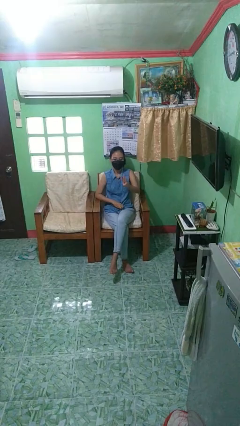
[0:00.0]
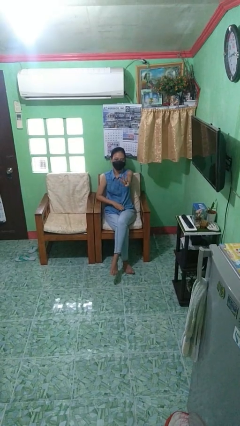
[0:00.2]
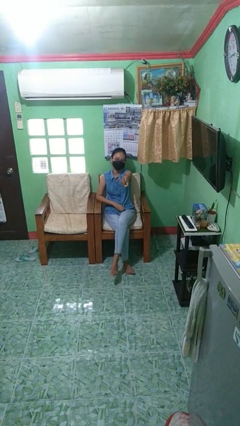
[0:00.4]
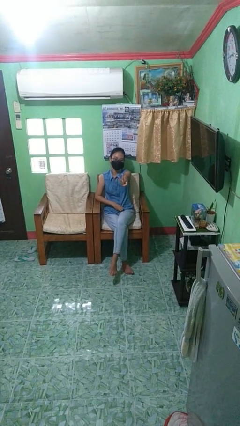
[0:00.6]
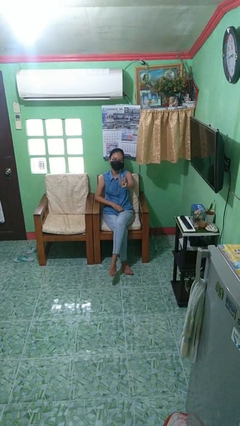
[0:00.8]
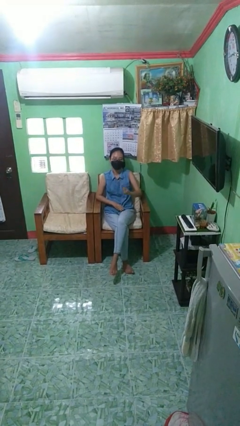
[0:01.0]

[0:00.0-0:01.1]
person gestures number three

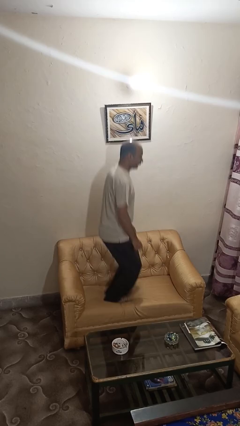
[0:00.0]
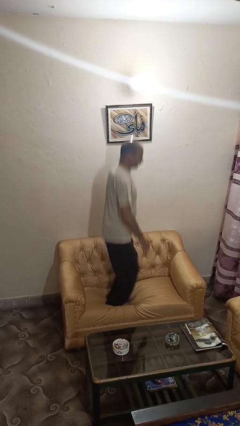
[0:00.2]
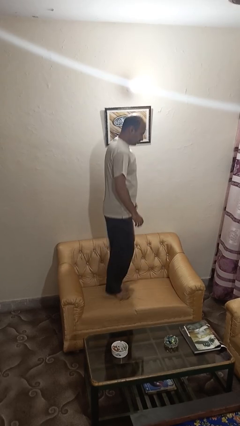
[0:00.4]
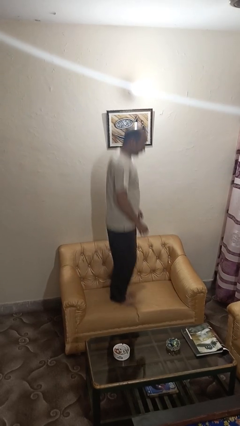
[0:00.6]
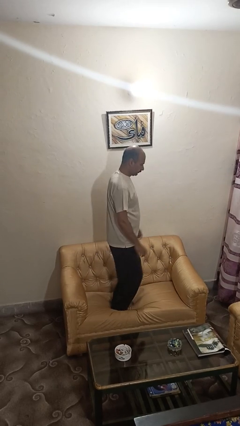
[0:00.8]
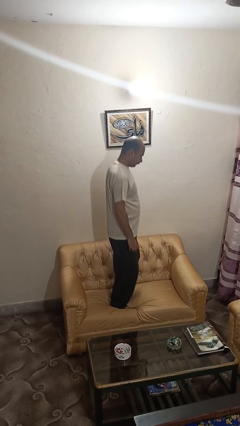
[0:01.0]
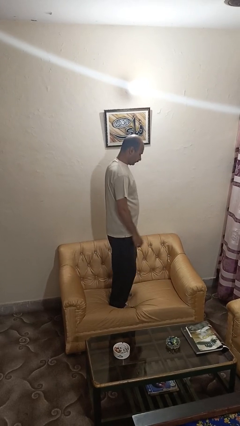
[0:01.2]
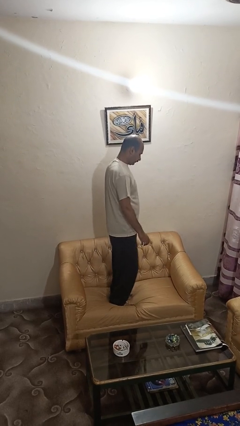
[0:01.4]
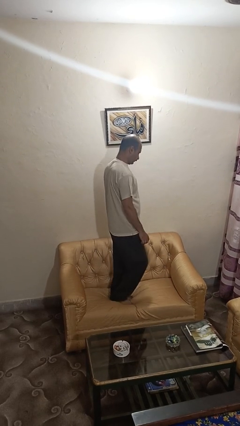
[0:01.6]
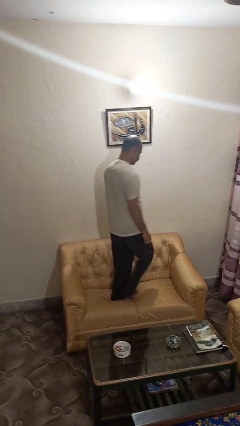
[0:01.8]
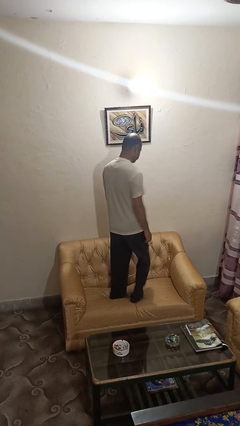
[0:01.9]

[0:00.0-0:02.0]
person jumps on couch

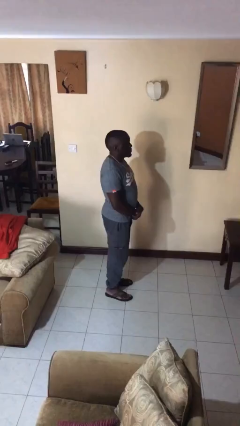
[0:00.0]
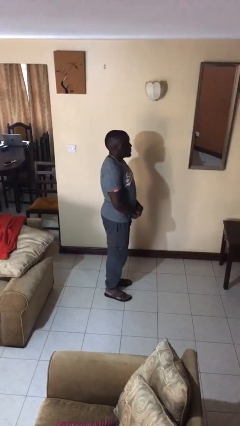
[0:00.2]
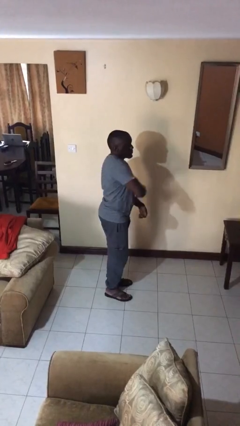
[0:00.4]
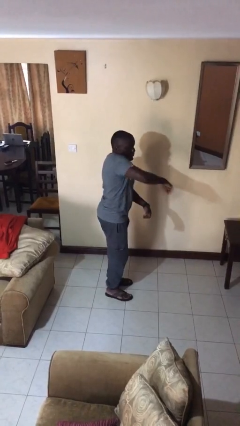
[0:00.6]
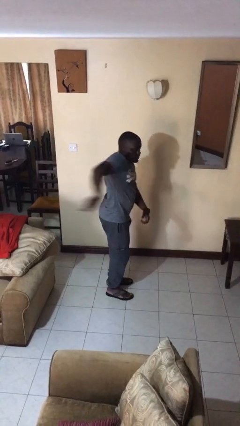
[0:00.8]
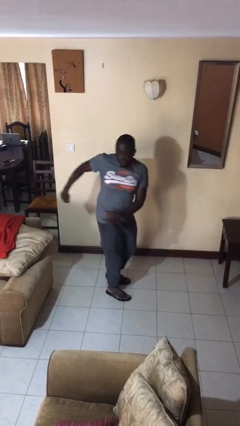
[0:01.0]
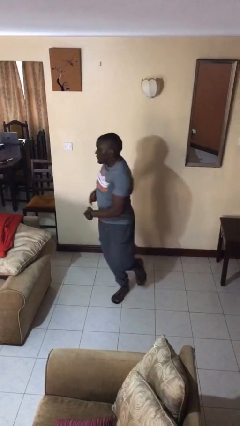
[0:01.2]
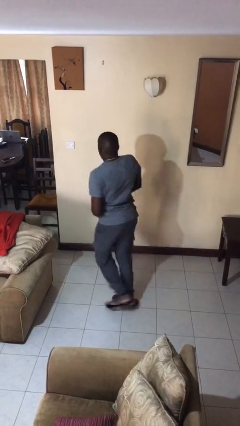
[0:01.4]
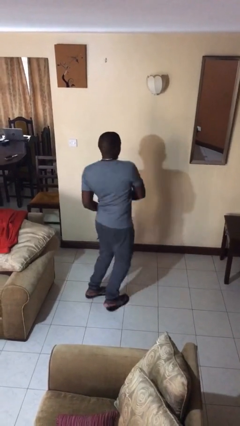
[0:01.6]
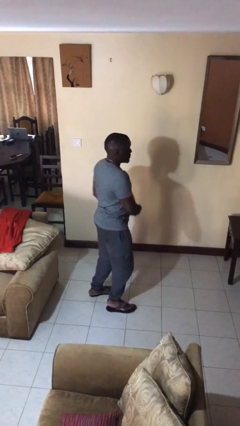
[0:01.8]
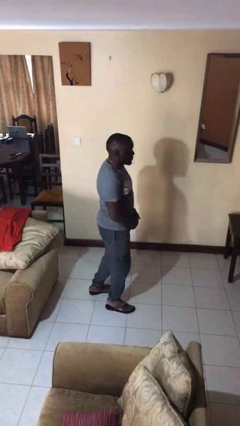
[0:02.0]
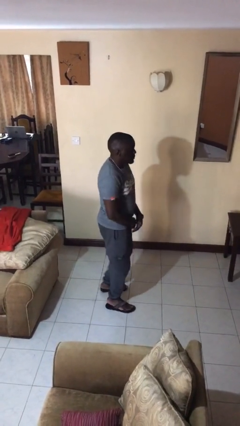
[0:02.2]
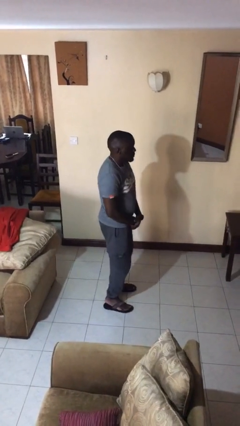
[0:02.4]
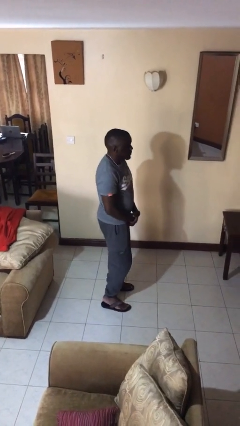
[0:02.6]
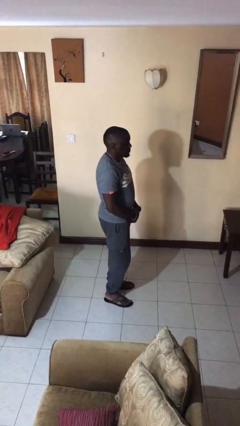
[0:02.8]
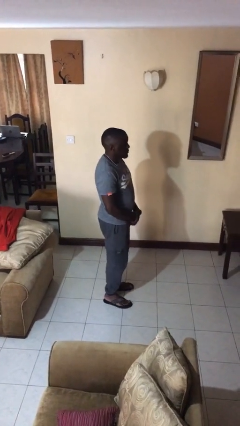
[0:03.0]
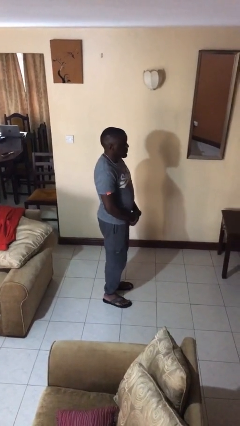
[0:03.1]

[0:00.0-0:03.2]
person twirls

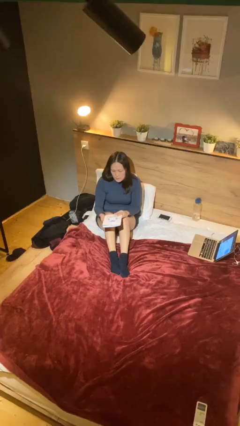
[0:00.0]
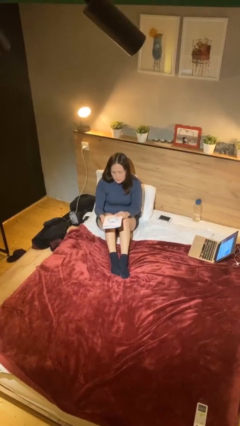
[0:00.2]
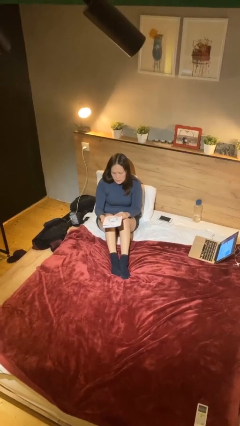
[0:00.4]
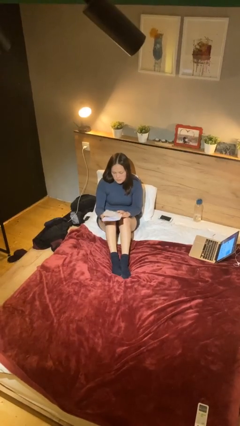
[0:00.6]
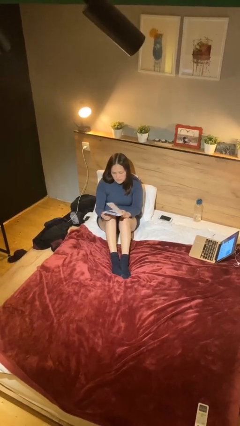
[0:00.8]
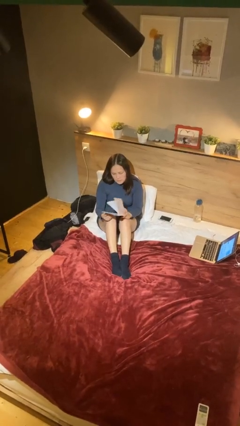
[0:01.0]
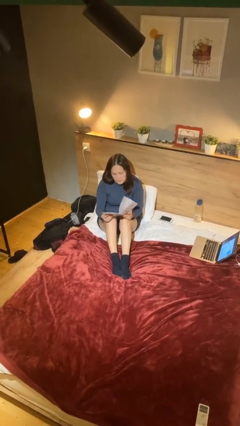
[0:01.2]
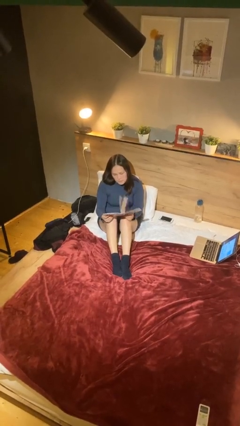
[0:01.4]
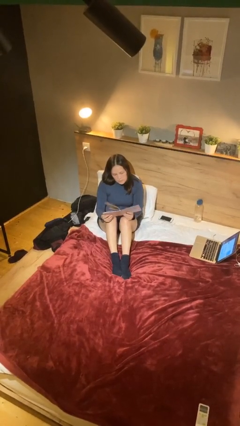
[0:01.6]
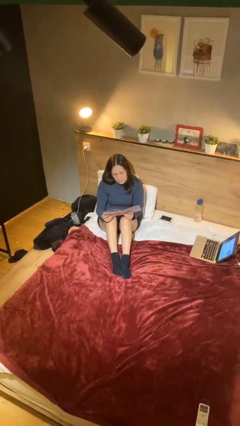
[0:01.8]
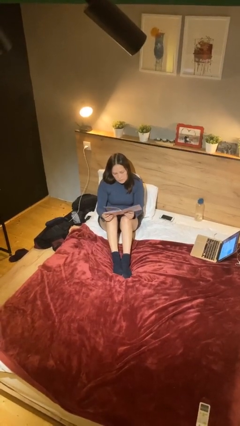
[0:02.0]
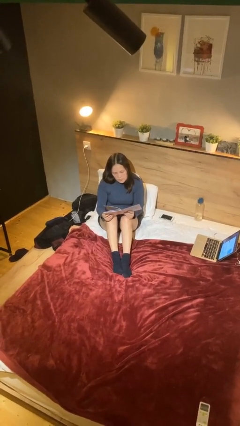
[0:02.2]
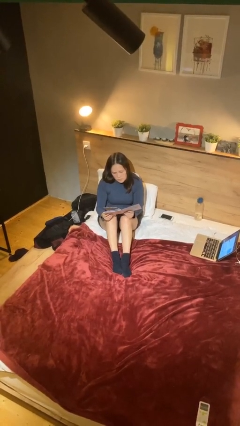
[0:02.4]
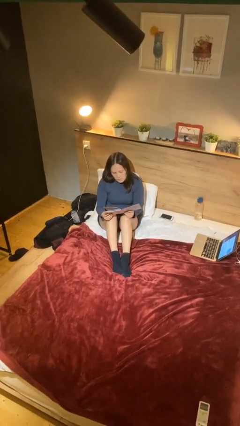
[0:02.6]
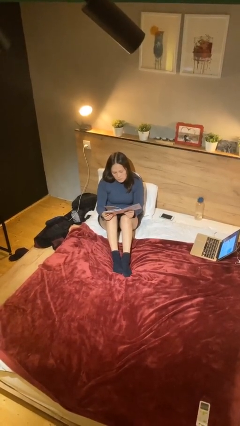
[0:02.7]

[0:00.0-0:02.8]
person reads document

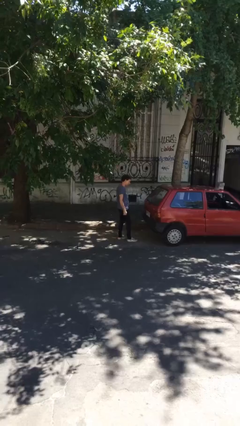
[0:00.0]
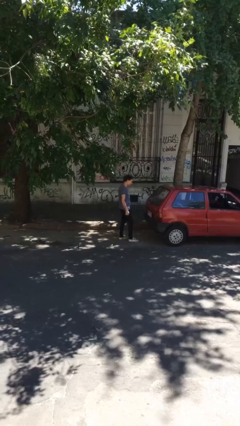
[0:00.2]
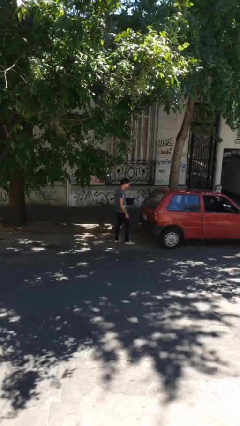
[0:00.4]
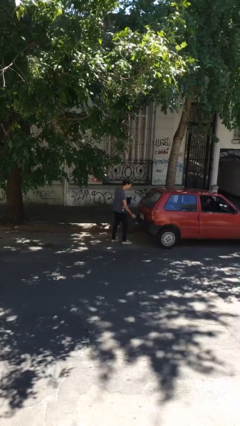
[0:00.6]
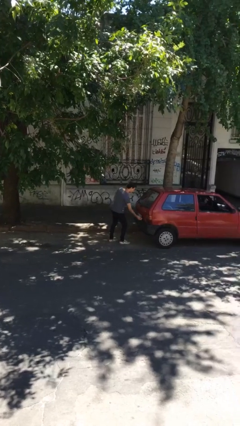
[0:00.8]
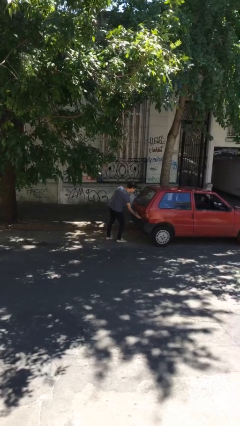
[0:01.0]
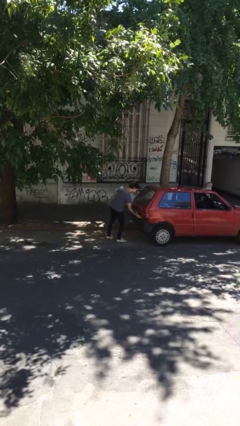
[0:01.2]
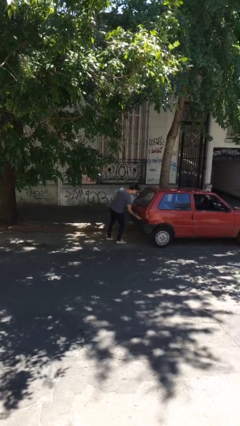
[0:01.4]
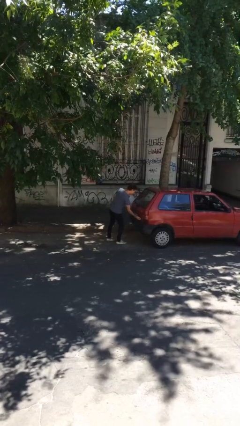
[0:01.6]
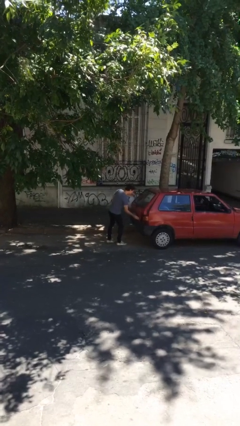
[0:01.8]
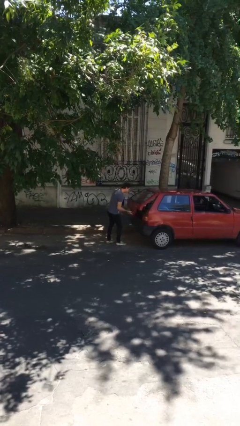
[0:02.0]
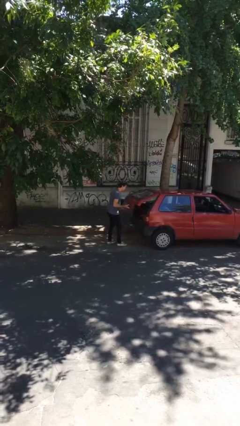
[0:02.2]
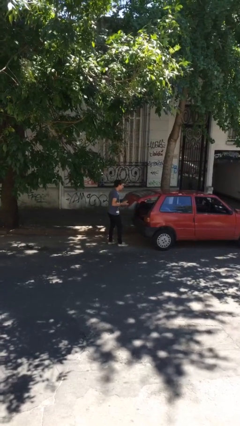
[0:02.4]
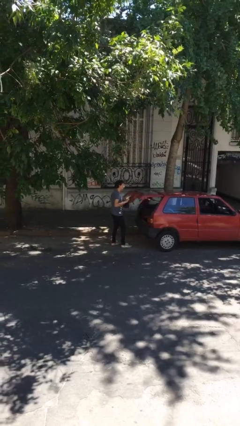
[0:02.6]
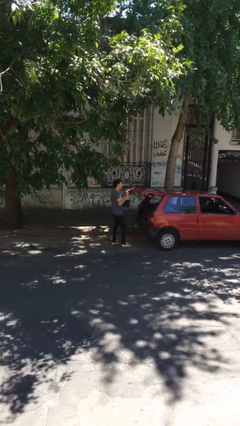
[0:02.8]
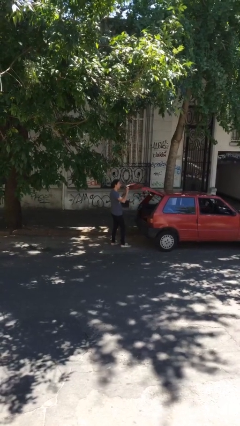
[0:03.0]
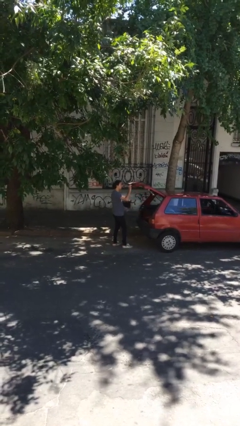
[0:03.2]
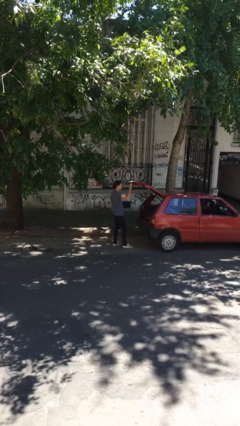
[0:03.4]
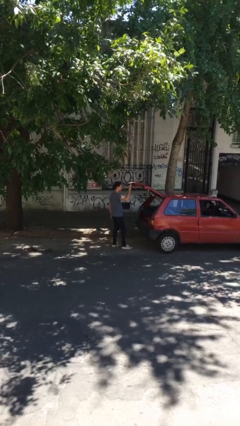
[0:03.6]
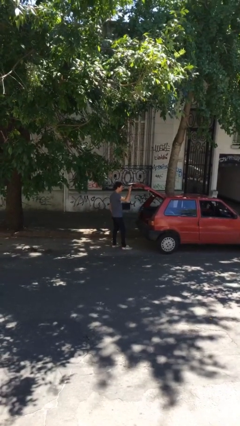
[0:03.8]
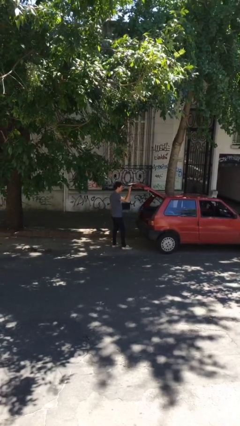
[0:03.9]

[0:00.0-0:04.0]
person opens car trunk

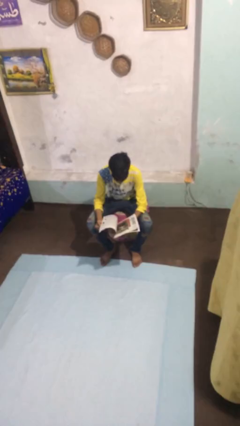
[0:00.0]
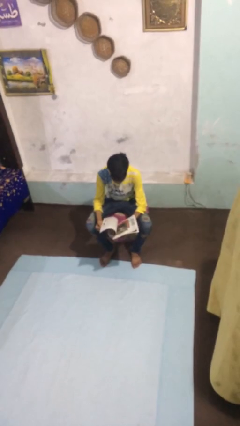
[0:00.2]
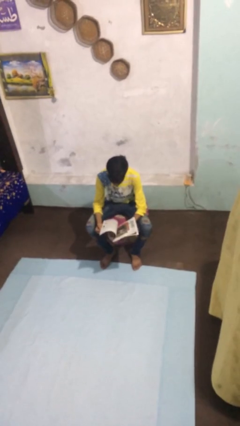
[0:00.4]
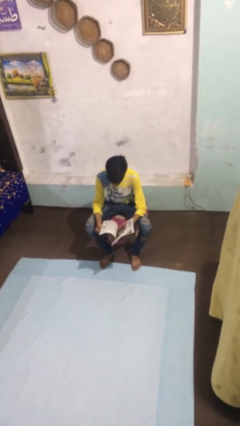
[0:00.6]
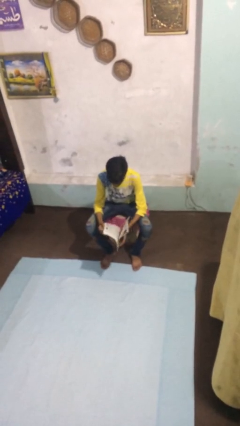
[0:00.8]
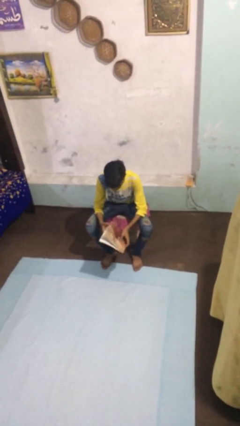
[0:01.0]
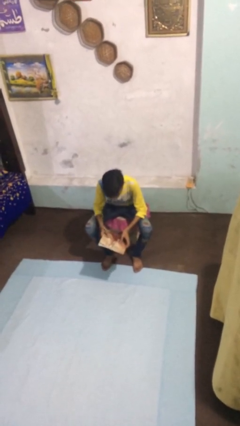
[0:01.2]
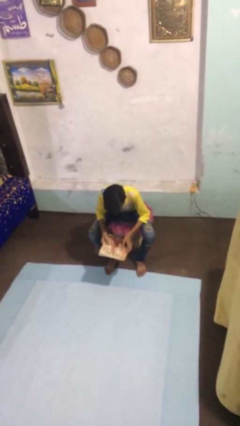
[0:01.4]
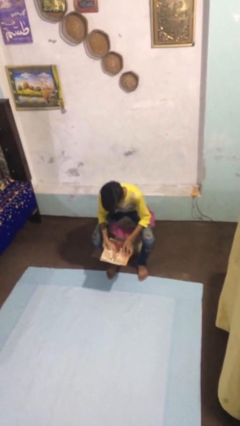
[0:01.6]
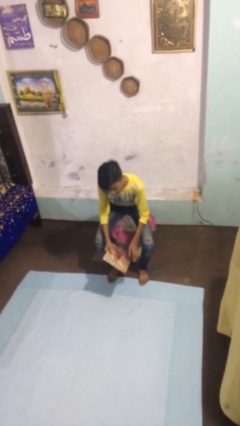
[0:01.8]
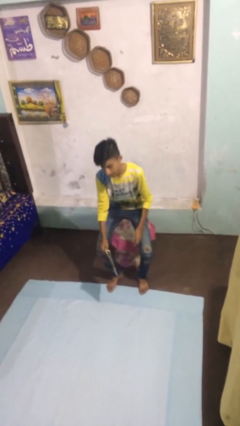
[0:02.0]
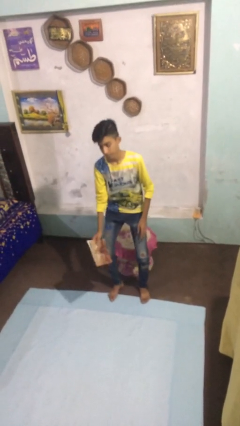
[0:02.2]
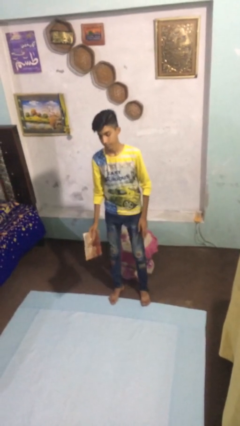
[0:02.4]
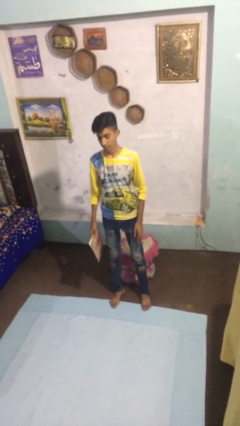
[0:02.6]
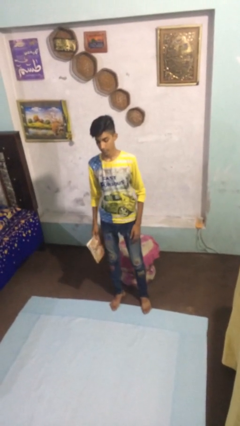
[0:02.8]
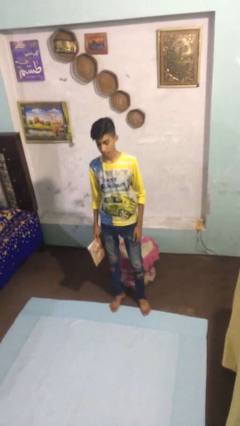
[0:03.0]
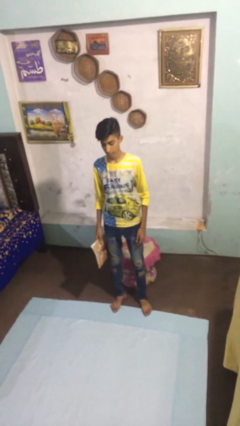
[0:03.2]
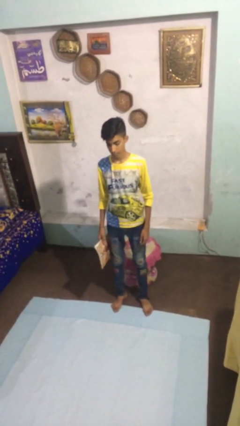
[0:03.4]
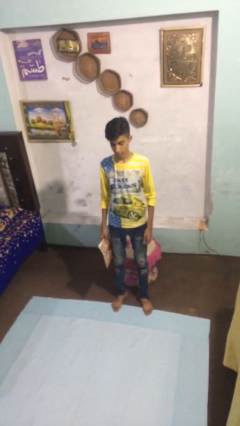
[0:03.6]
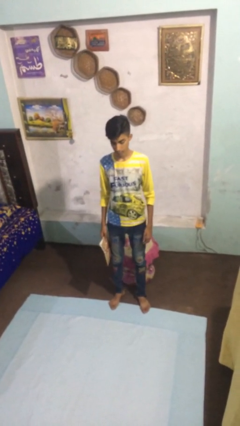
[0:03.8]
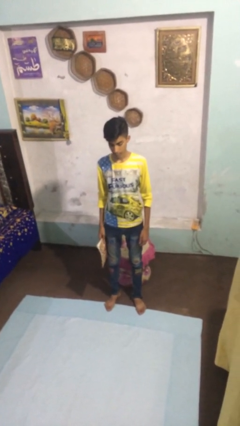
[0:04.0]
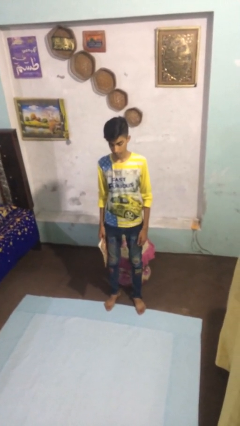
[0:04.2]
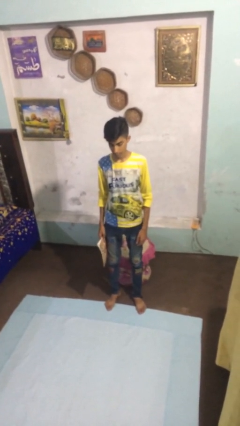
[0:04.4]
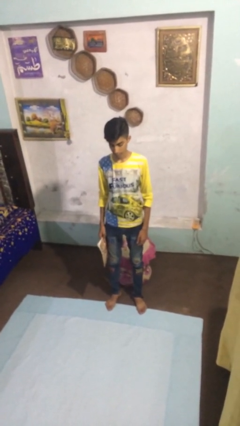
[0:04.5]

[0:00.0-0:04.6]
person stands up
